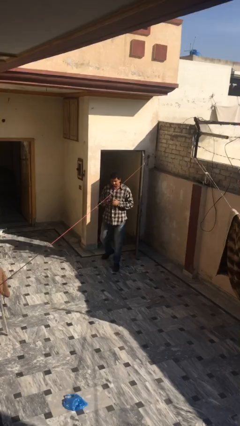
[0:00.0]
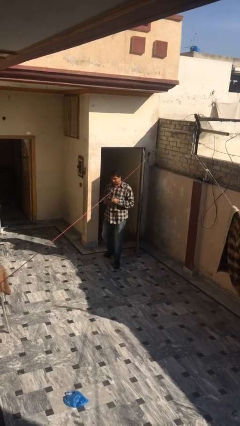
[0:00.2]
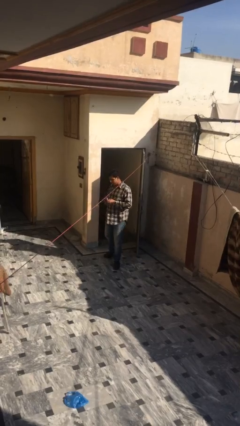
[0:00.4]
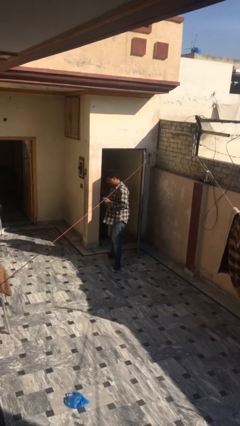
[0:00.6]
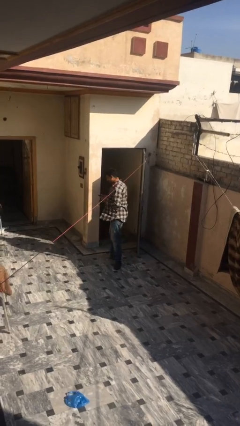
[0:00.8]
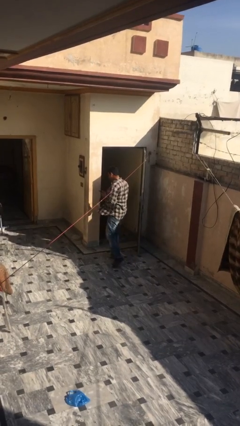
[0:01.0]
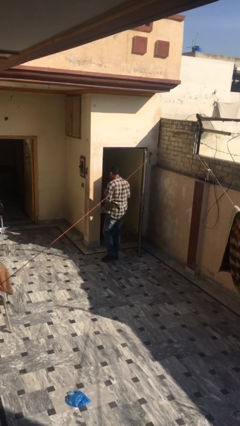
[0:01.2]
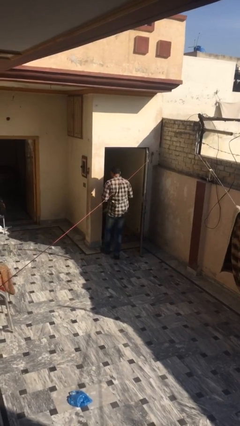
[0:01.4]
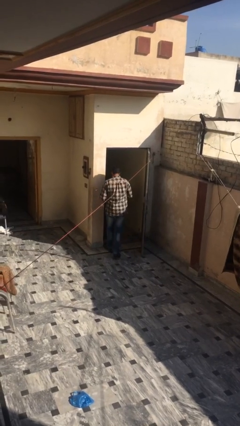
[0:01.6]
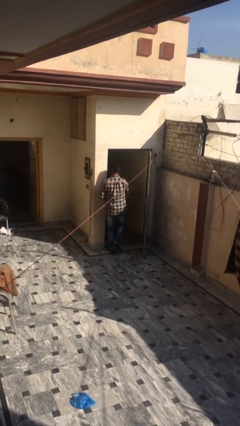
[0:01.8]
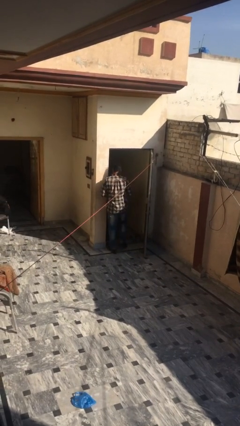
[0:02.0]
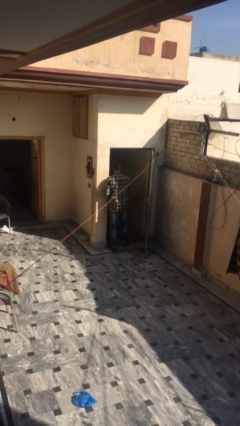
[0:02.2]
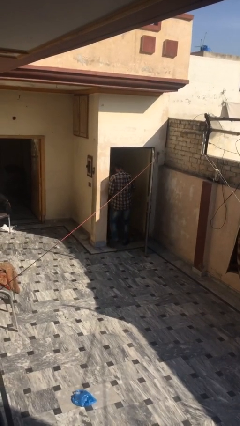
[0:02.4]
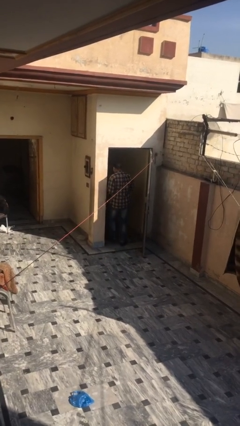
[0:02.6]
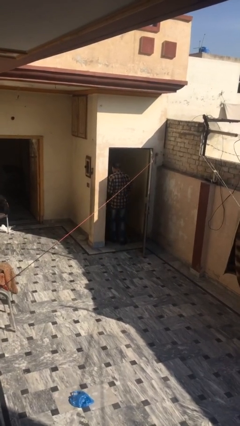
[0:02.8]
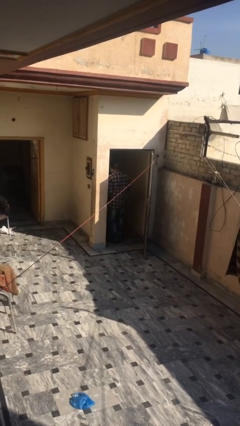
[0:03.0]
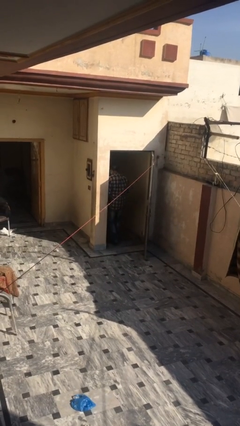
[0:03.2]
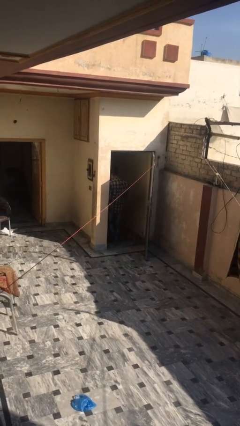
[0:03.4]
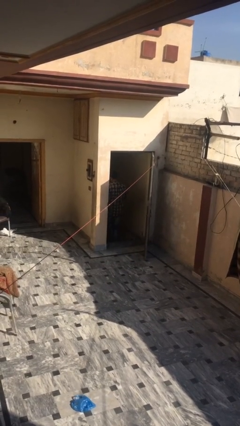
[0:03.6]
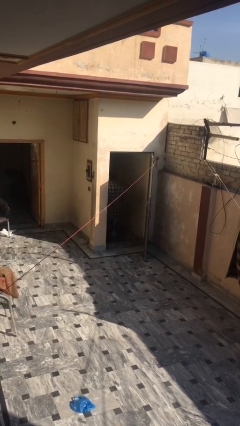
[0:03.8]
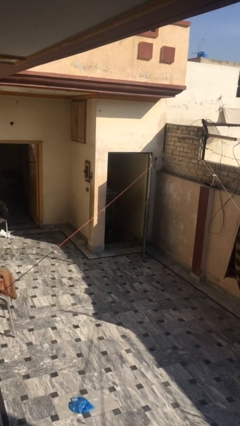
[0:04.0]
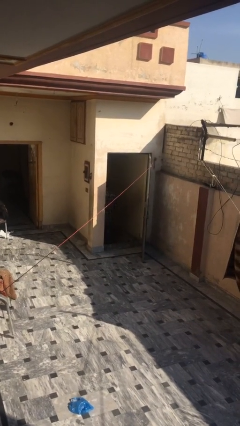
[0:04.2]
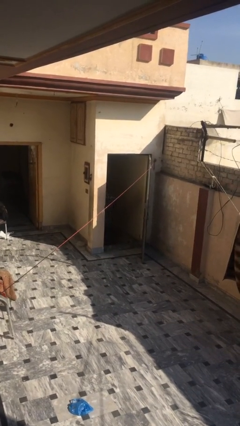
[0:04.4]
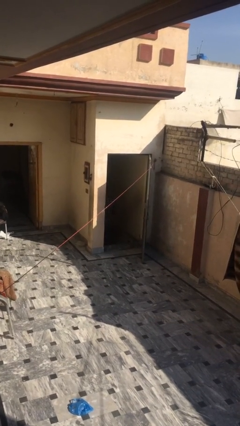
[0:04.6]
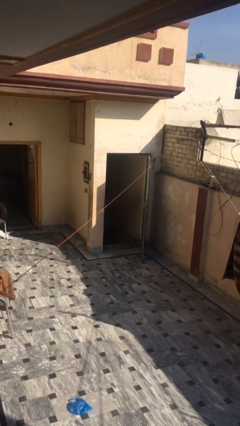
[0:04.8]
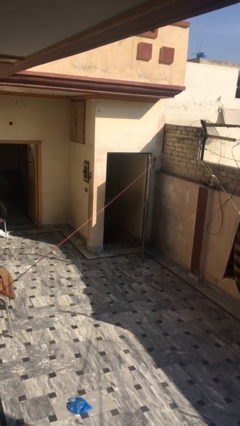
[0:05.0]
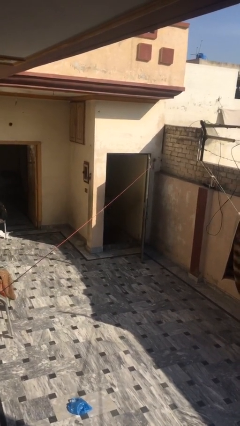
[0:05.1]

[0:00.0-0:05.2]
person exits scene through structure

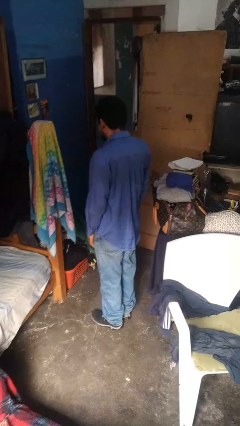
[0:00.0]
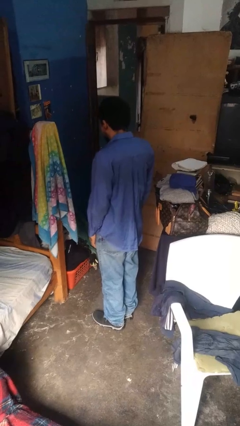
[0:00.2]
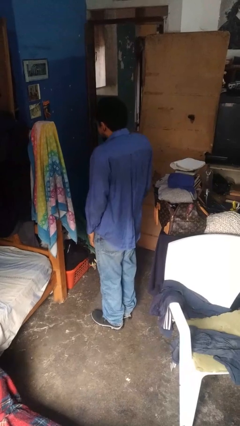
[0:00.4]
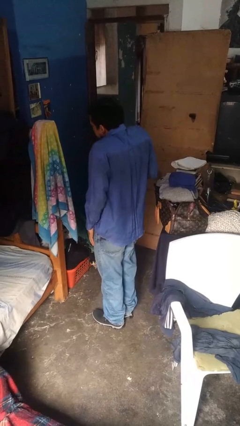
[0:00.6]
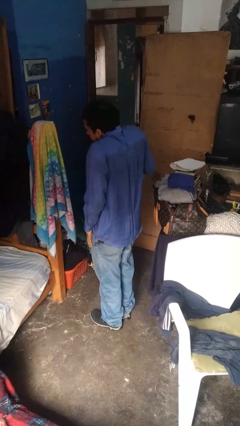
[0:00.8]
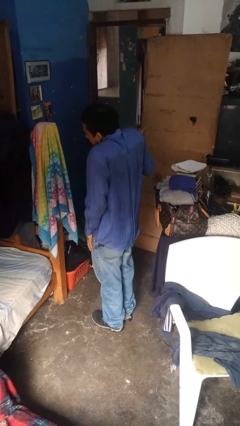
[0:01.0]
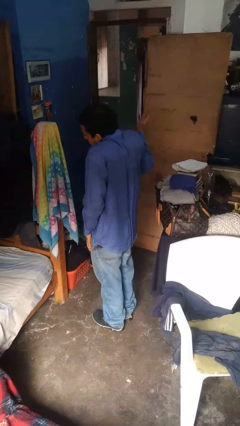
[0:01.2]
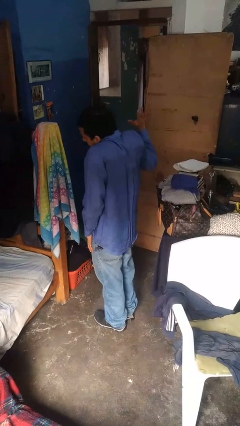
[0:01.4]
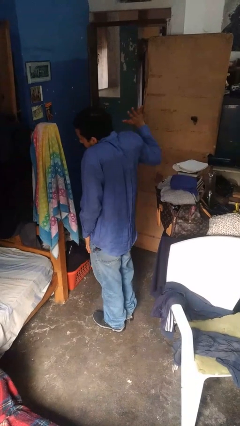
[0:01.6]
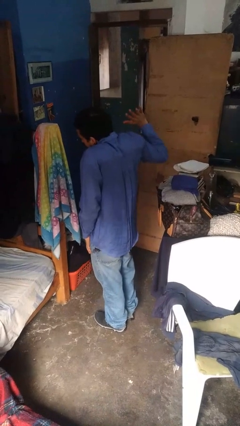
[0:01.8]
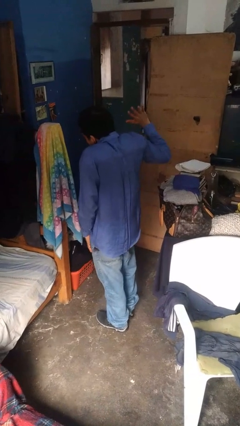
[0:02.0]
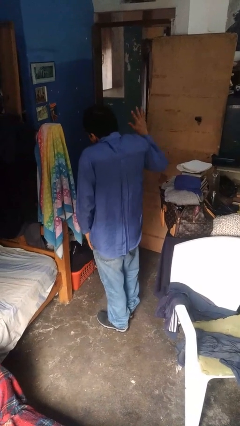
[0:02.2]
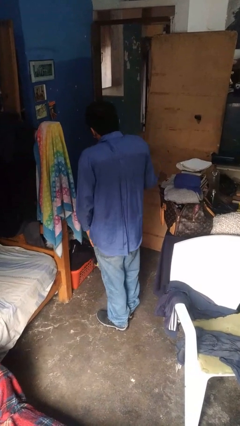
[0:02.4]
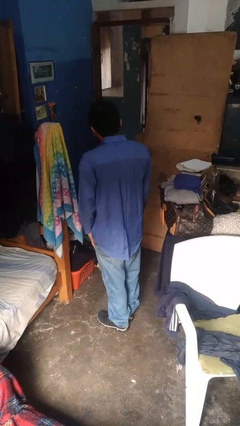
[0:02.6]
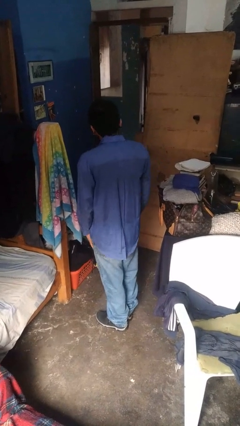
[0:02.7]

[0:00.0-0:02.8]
person shrugs

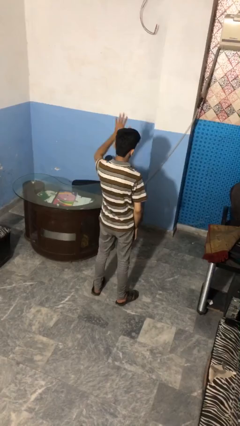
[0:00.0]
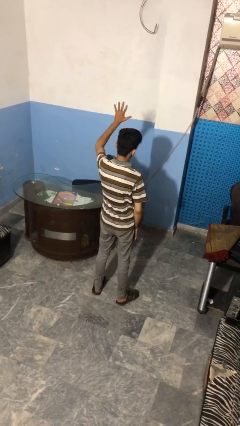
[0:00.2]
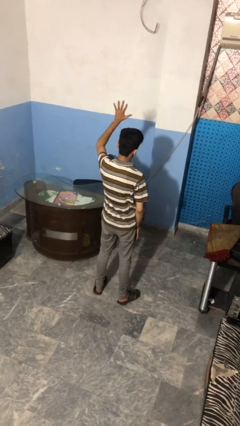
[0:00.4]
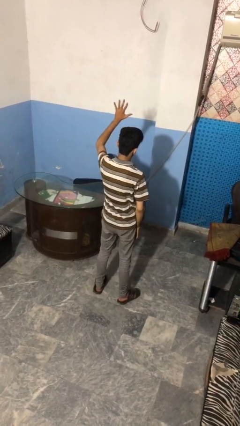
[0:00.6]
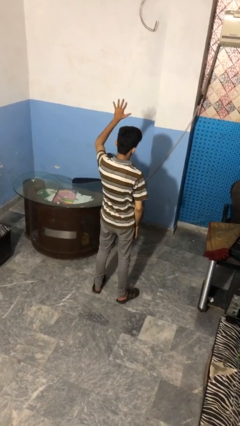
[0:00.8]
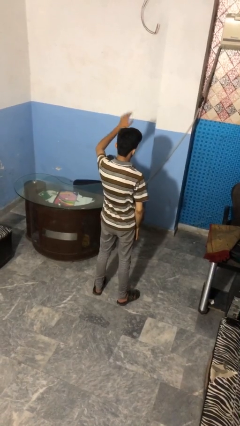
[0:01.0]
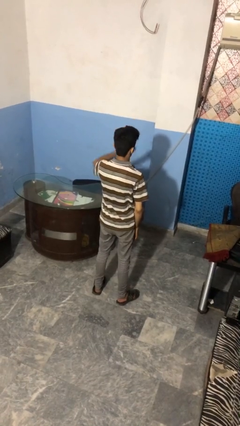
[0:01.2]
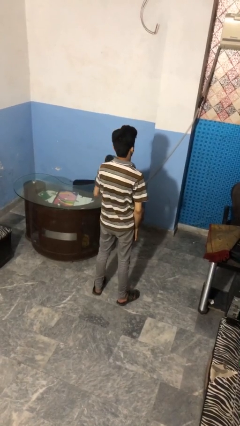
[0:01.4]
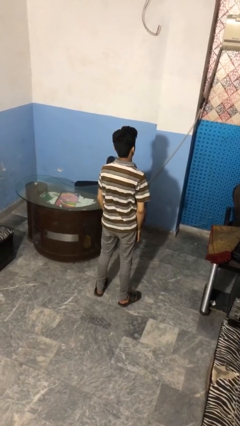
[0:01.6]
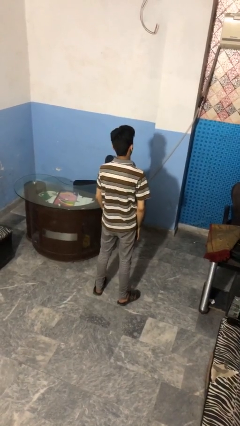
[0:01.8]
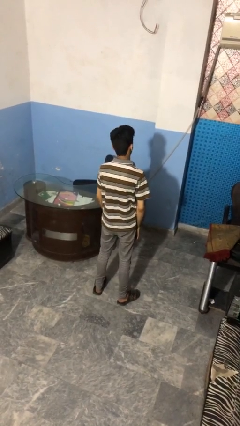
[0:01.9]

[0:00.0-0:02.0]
person gestures number five

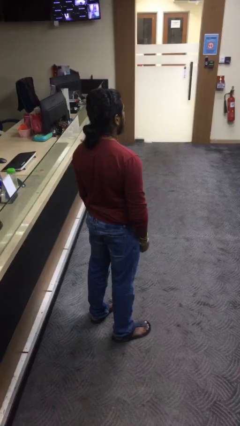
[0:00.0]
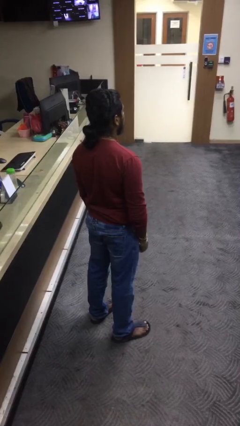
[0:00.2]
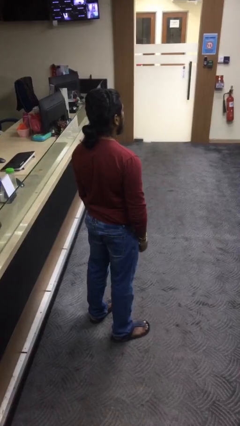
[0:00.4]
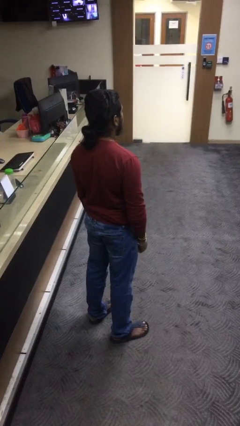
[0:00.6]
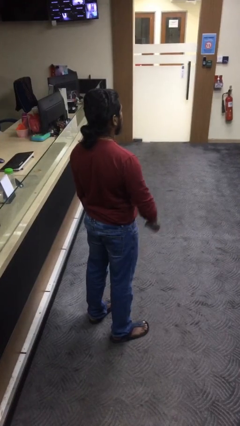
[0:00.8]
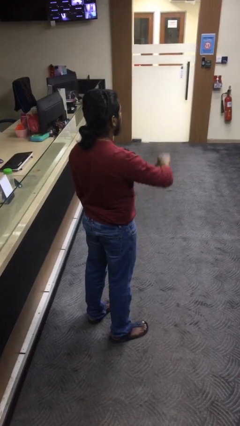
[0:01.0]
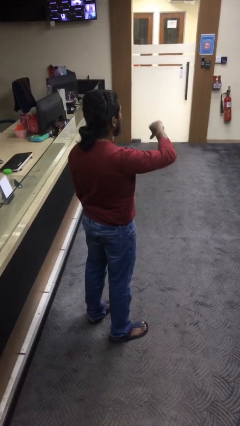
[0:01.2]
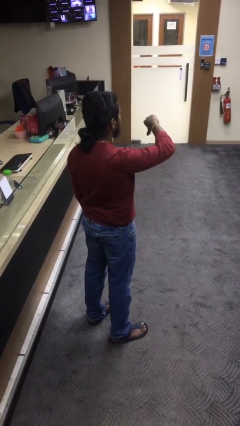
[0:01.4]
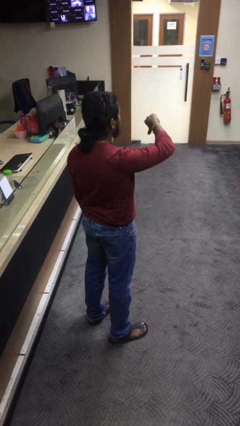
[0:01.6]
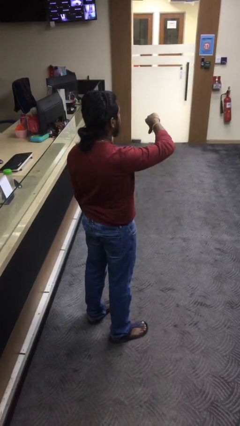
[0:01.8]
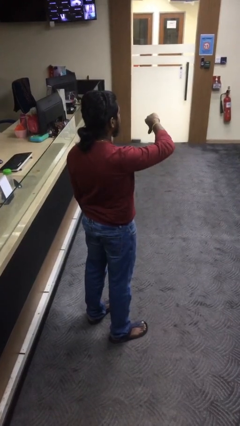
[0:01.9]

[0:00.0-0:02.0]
person gestures thumbs down

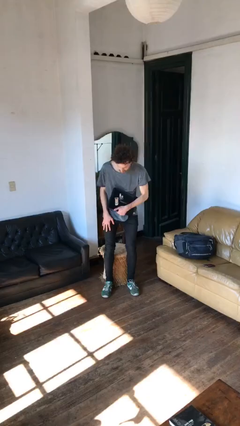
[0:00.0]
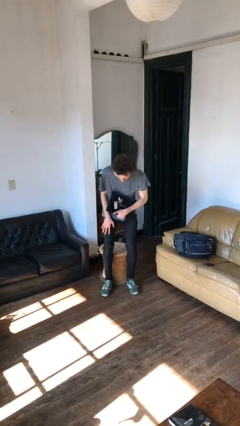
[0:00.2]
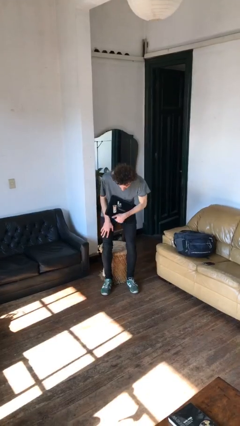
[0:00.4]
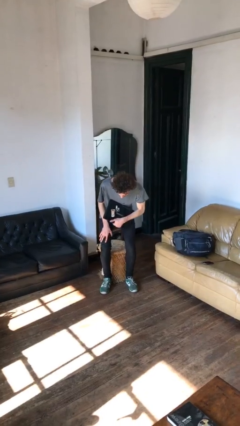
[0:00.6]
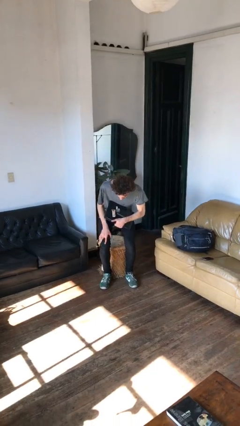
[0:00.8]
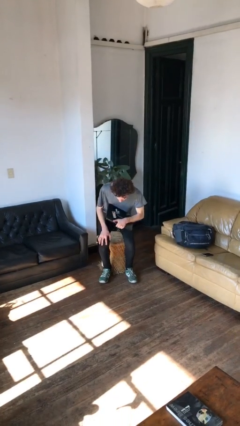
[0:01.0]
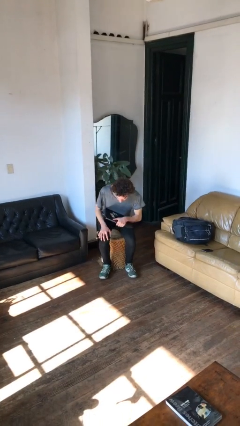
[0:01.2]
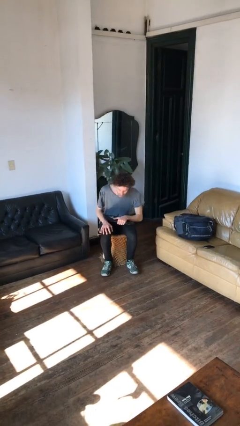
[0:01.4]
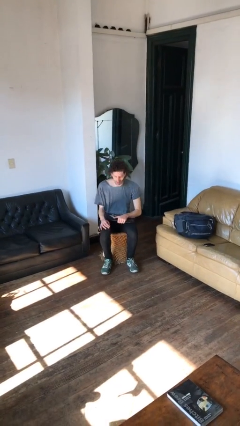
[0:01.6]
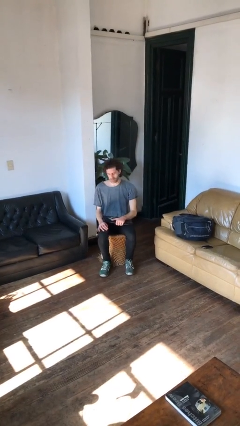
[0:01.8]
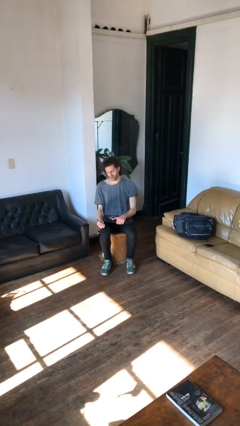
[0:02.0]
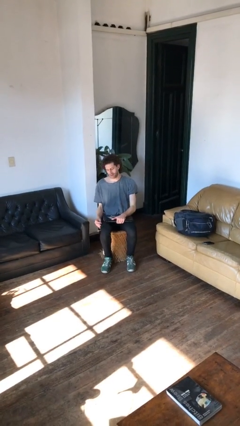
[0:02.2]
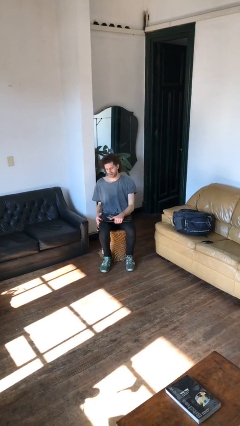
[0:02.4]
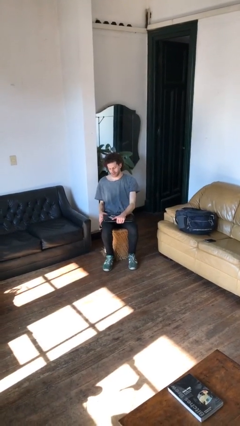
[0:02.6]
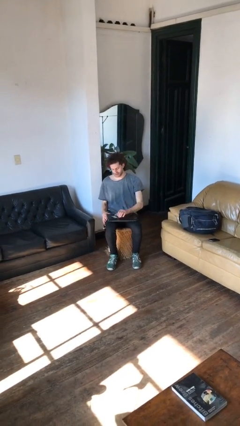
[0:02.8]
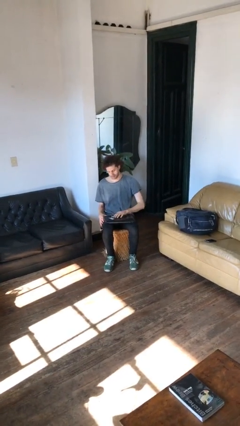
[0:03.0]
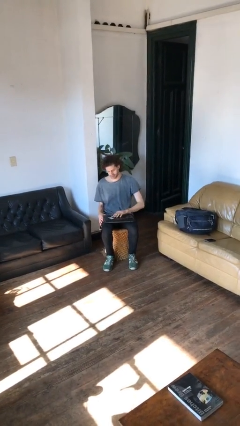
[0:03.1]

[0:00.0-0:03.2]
person sits down

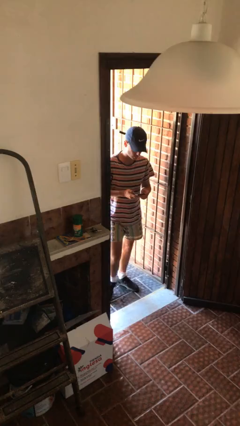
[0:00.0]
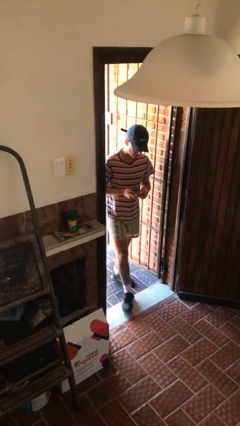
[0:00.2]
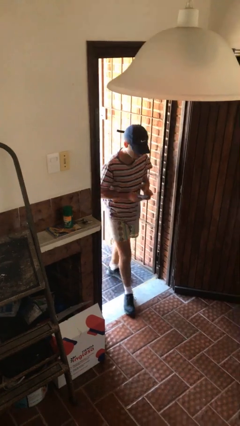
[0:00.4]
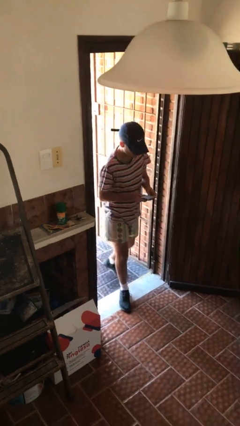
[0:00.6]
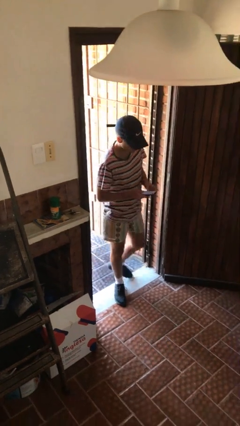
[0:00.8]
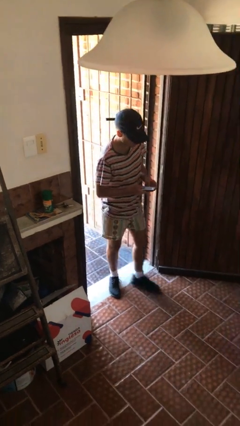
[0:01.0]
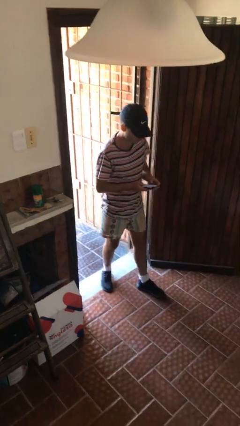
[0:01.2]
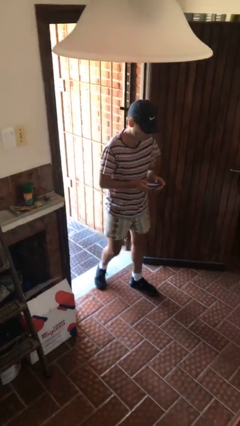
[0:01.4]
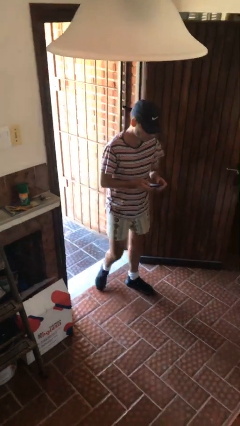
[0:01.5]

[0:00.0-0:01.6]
person enters scene through structure

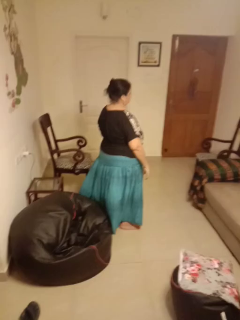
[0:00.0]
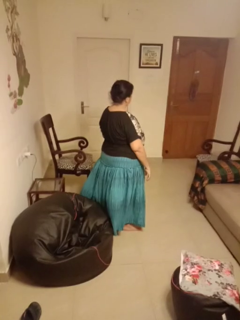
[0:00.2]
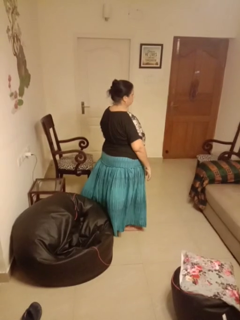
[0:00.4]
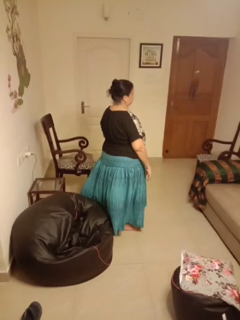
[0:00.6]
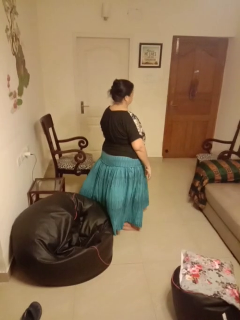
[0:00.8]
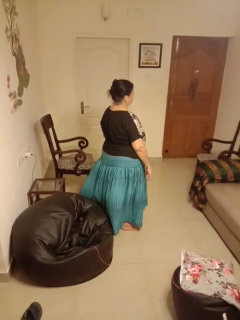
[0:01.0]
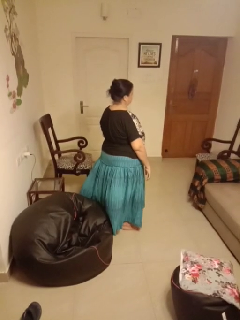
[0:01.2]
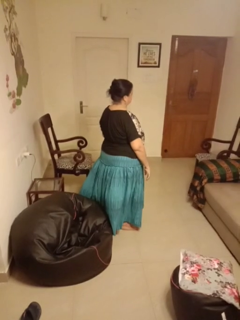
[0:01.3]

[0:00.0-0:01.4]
person shakes head
